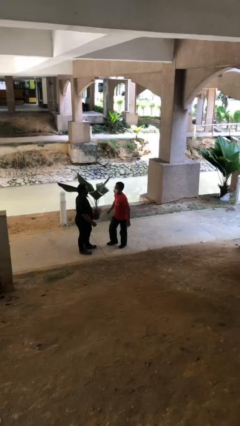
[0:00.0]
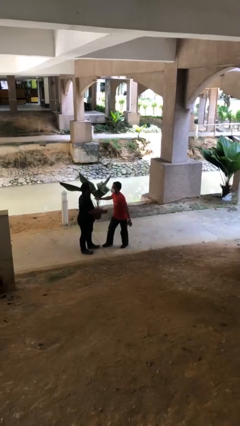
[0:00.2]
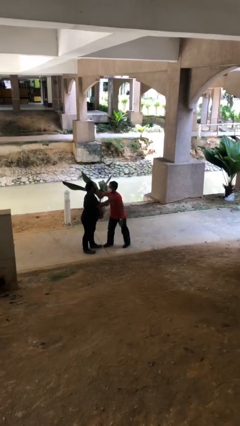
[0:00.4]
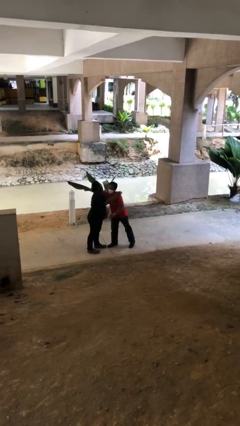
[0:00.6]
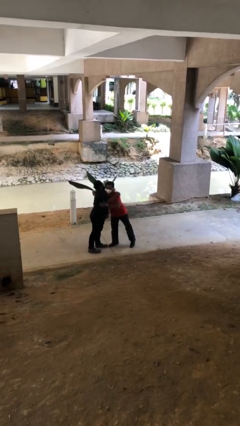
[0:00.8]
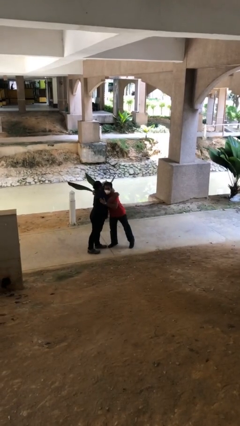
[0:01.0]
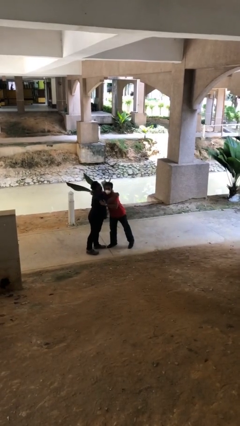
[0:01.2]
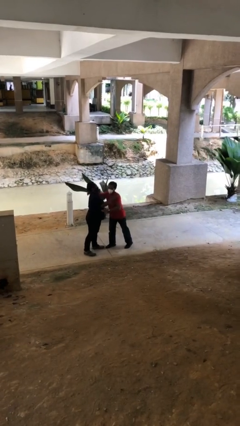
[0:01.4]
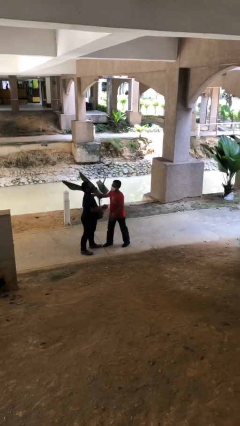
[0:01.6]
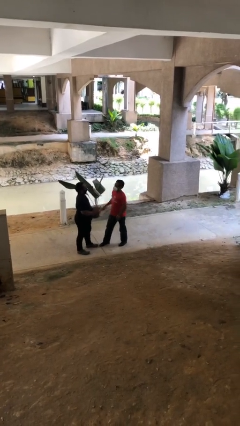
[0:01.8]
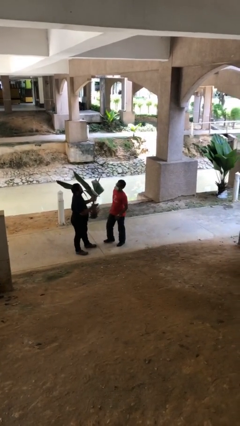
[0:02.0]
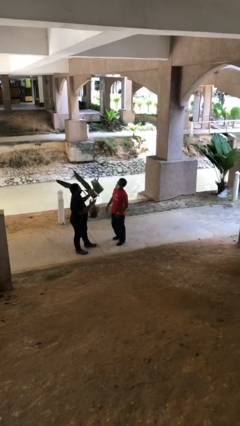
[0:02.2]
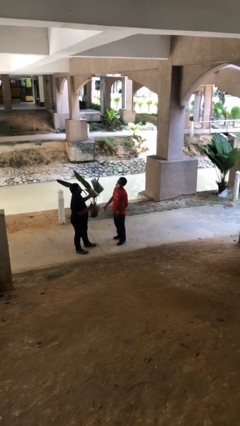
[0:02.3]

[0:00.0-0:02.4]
person embraces person

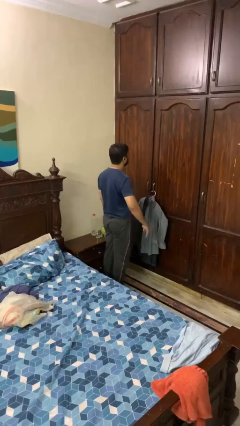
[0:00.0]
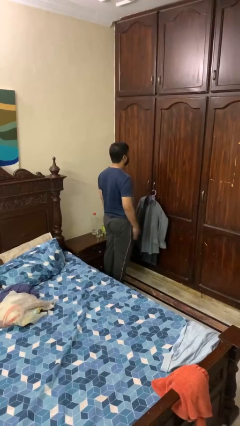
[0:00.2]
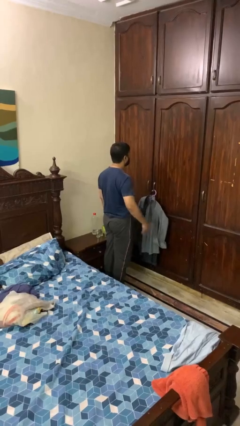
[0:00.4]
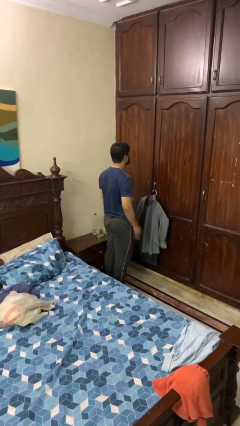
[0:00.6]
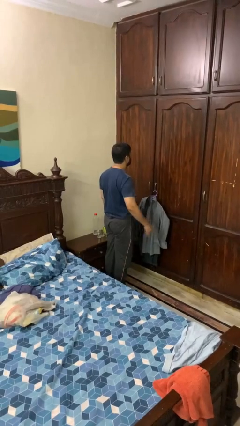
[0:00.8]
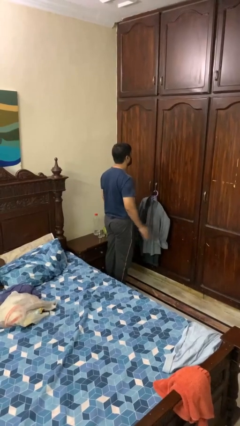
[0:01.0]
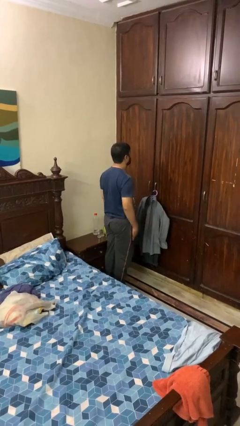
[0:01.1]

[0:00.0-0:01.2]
person slaps hands on thighs

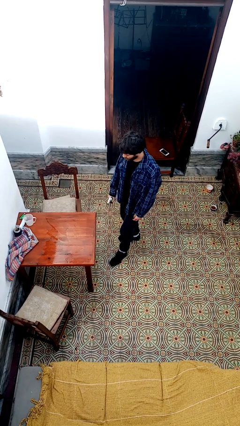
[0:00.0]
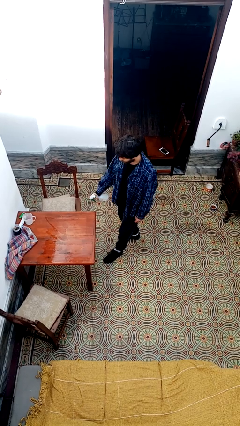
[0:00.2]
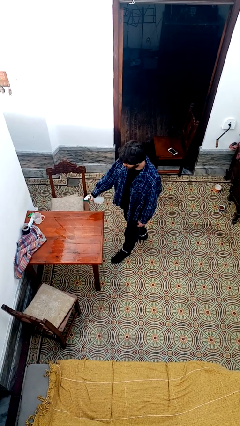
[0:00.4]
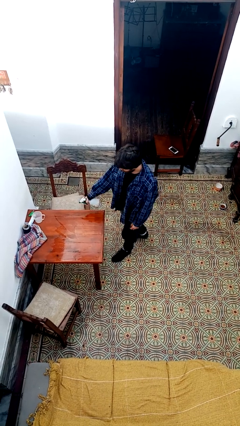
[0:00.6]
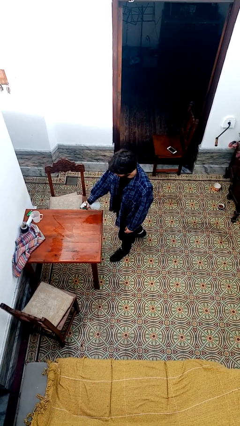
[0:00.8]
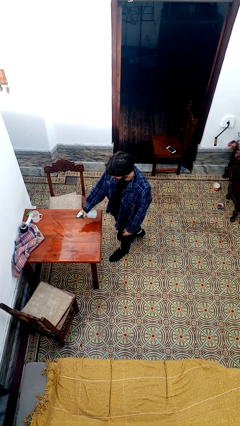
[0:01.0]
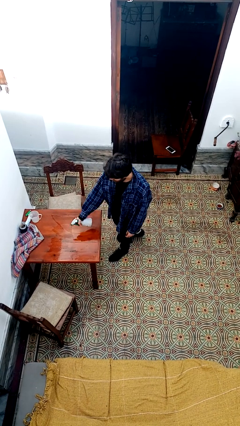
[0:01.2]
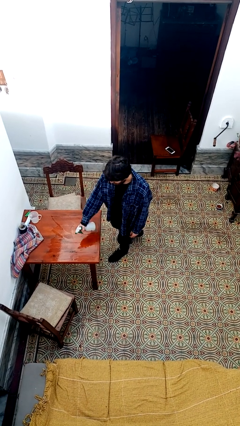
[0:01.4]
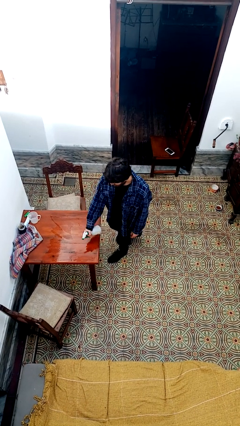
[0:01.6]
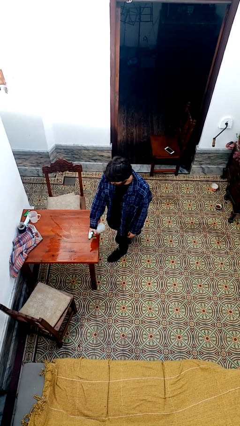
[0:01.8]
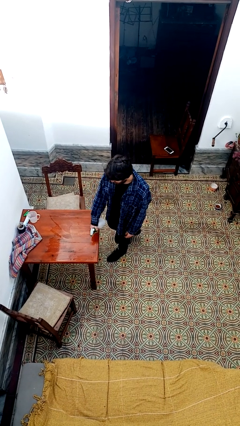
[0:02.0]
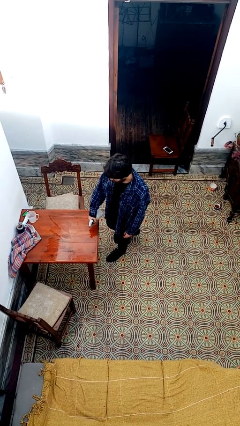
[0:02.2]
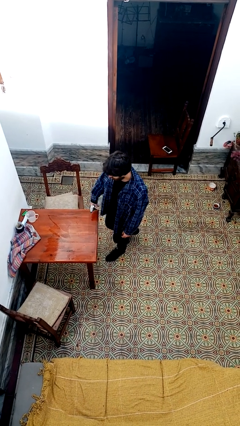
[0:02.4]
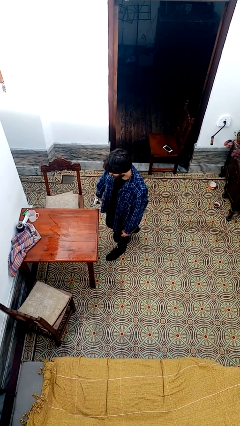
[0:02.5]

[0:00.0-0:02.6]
person sprays from bottle

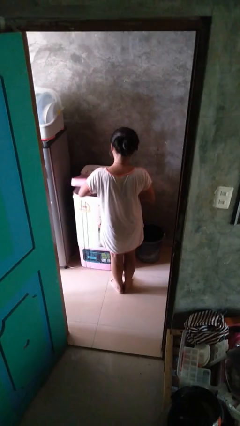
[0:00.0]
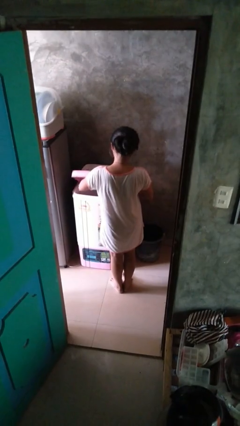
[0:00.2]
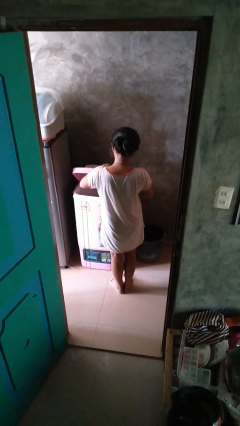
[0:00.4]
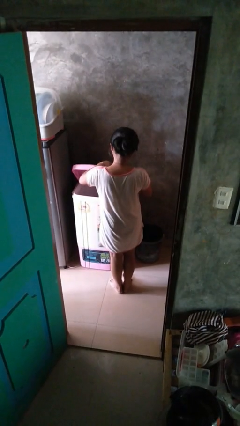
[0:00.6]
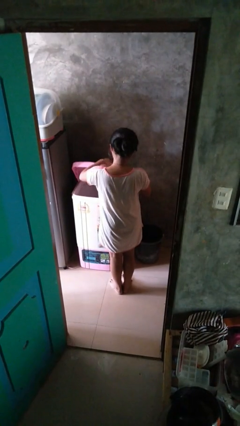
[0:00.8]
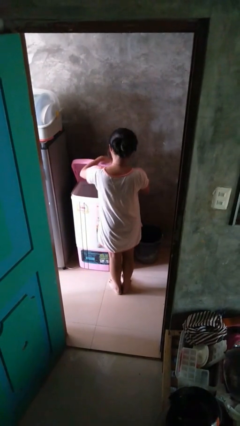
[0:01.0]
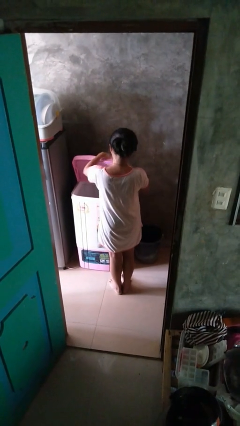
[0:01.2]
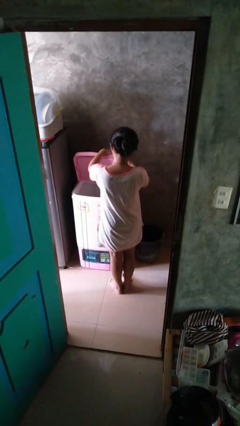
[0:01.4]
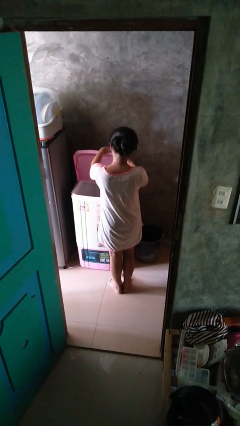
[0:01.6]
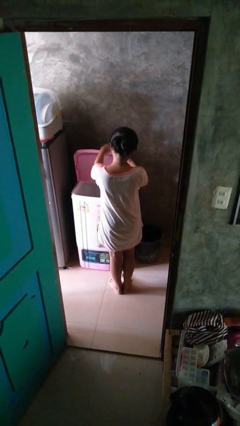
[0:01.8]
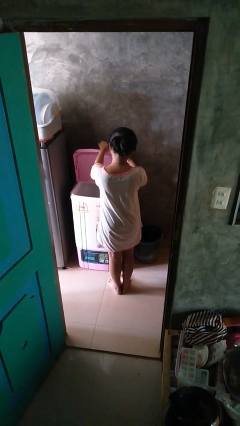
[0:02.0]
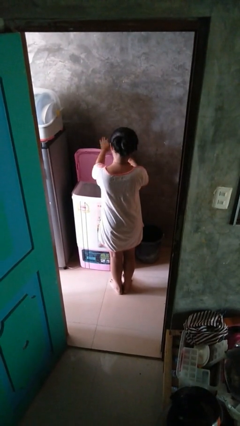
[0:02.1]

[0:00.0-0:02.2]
person opens clothes washer

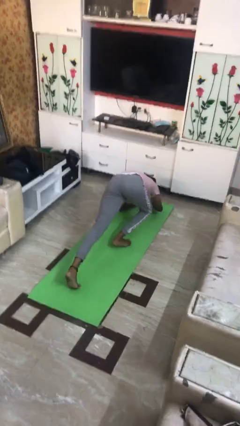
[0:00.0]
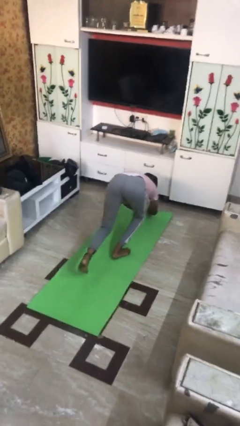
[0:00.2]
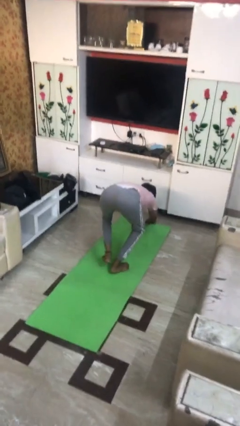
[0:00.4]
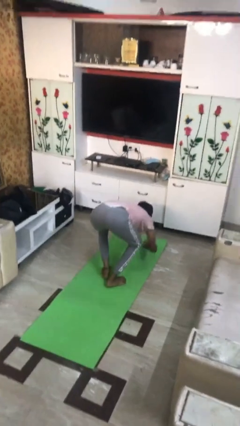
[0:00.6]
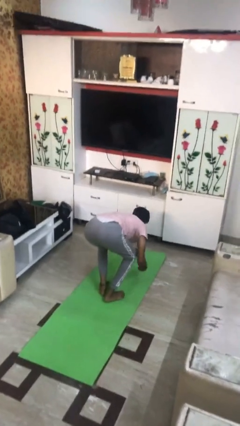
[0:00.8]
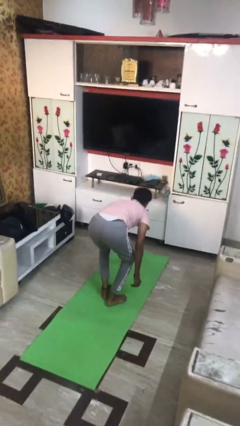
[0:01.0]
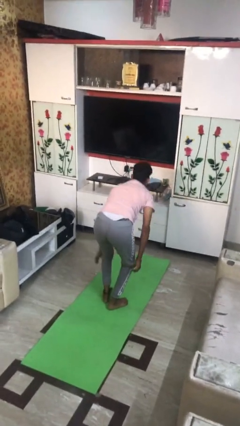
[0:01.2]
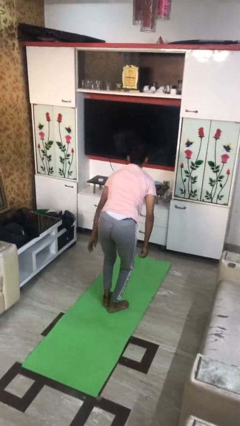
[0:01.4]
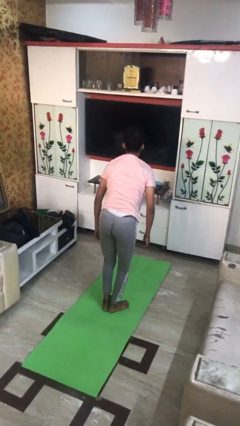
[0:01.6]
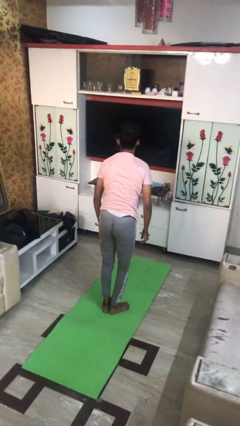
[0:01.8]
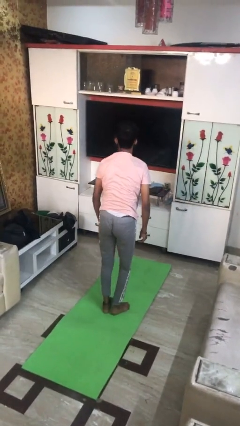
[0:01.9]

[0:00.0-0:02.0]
person stands up from floor

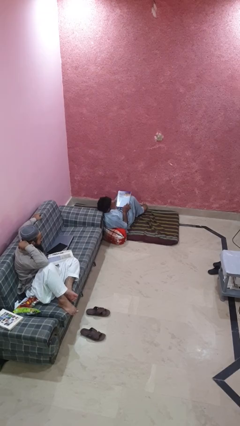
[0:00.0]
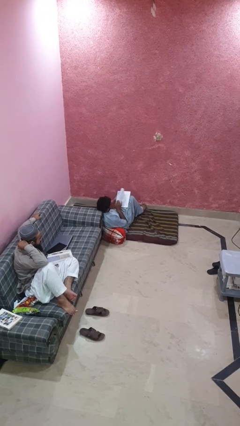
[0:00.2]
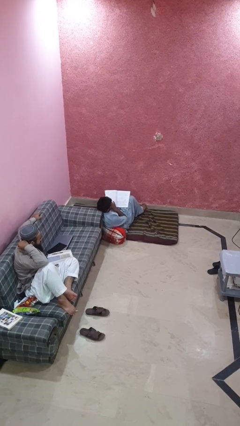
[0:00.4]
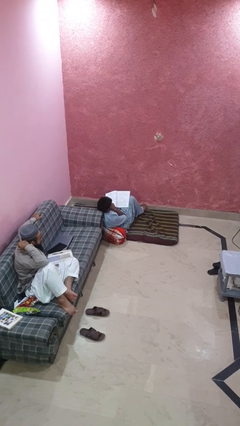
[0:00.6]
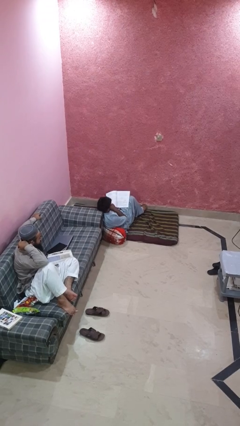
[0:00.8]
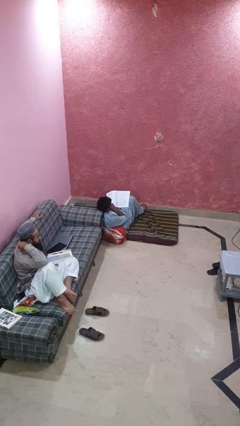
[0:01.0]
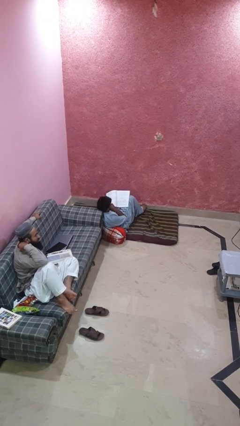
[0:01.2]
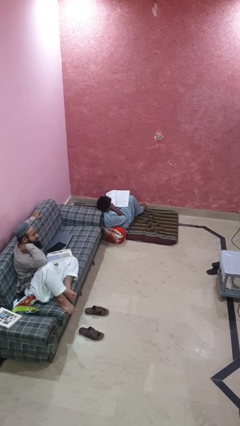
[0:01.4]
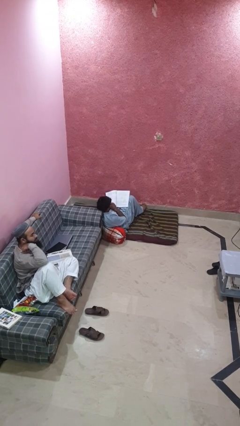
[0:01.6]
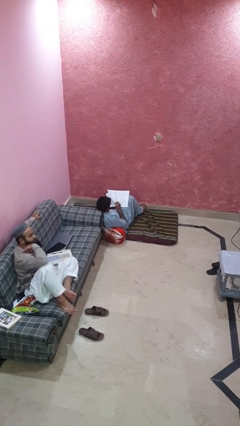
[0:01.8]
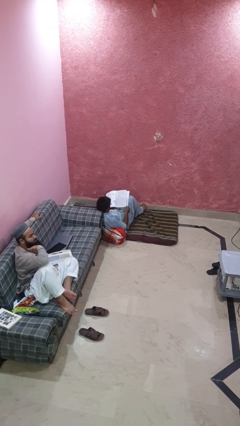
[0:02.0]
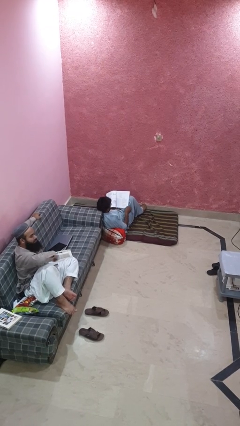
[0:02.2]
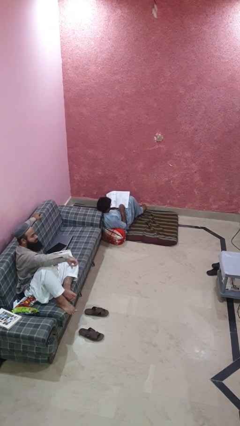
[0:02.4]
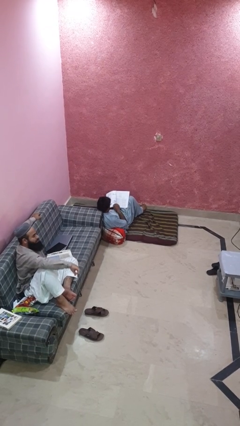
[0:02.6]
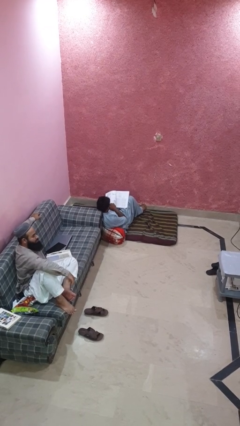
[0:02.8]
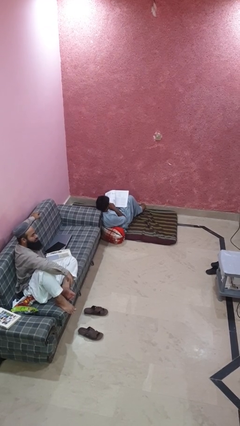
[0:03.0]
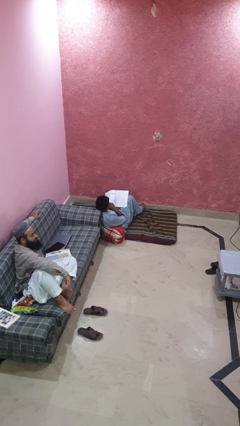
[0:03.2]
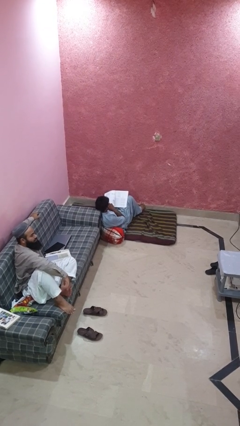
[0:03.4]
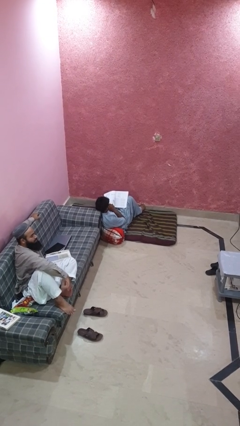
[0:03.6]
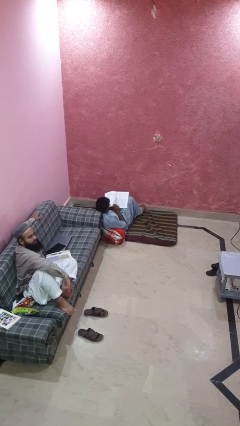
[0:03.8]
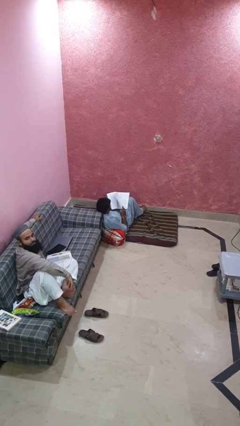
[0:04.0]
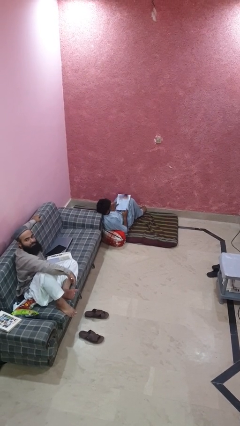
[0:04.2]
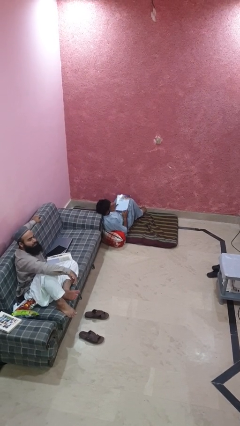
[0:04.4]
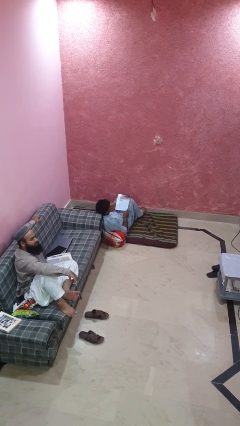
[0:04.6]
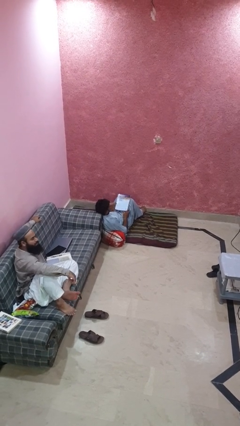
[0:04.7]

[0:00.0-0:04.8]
person reads magazine

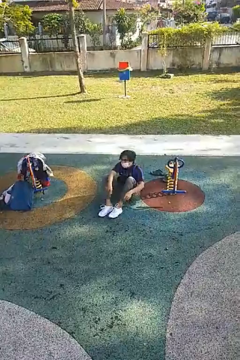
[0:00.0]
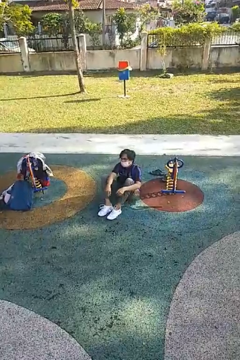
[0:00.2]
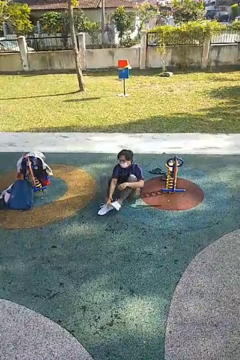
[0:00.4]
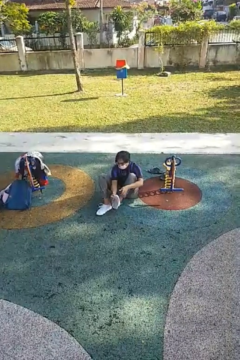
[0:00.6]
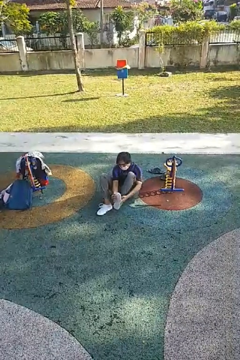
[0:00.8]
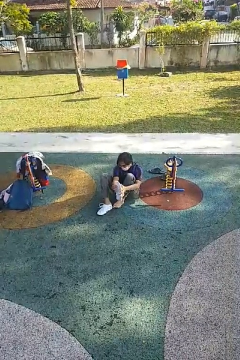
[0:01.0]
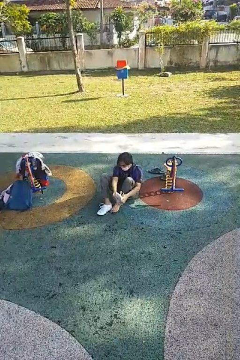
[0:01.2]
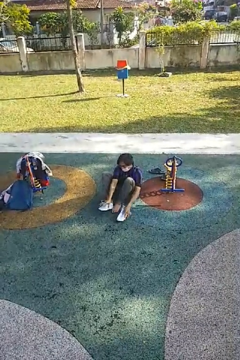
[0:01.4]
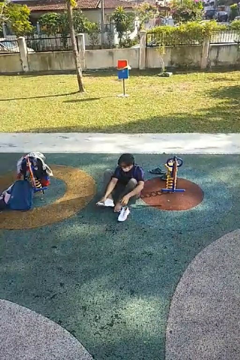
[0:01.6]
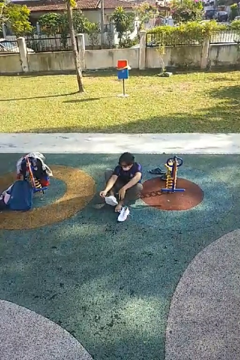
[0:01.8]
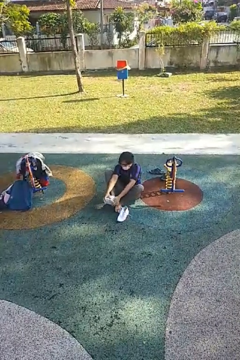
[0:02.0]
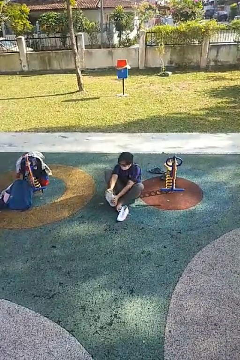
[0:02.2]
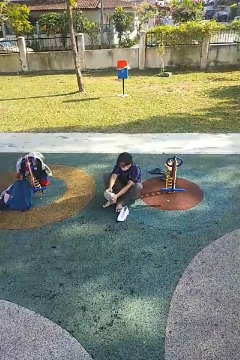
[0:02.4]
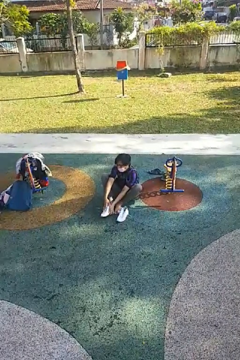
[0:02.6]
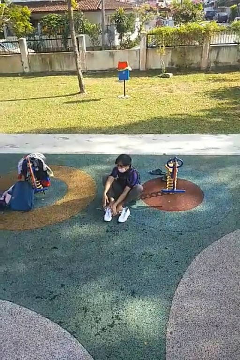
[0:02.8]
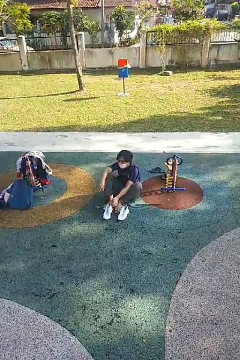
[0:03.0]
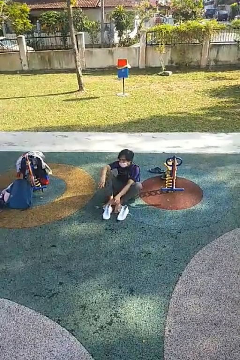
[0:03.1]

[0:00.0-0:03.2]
person takes off shoes
